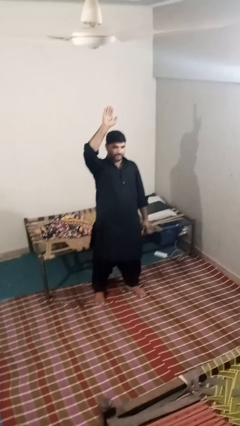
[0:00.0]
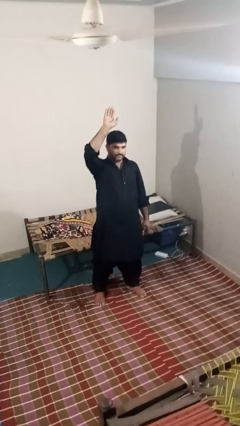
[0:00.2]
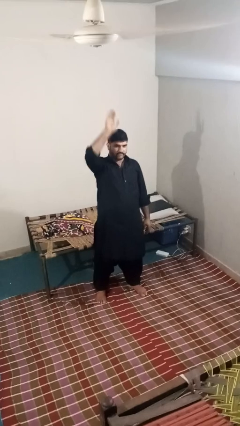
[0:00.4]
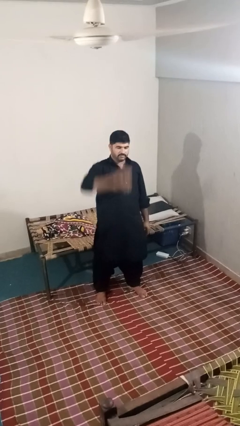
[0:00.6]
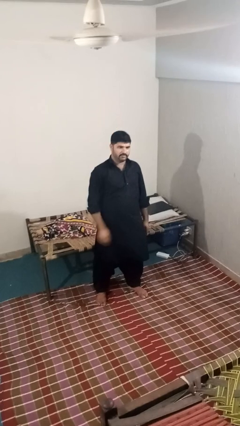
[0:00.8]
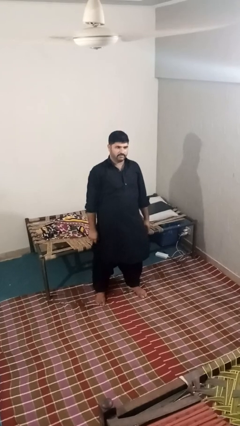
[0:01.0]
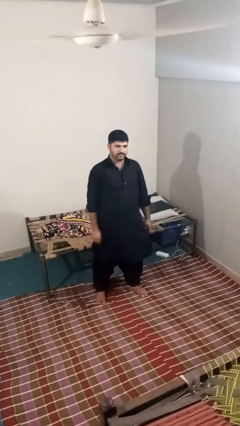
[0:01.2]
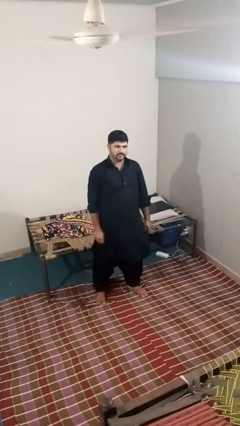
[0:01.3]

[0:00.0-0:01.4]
person gestures lower hand

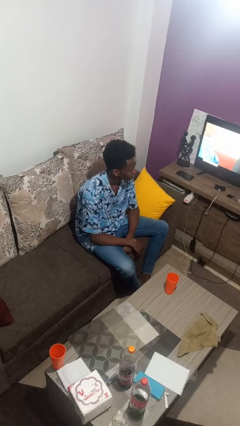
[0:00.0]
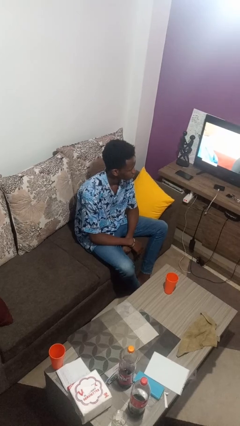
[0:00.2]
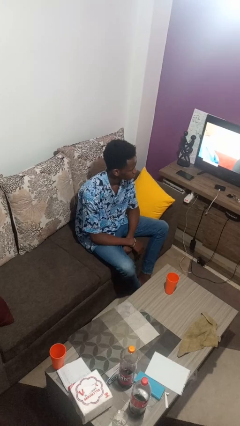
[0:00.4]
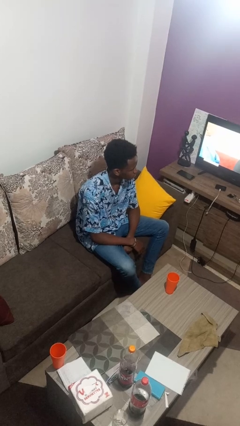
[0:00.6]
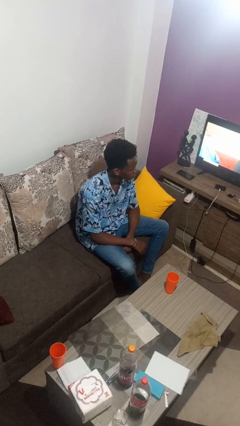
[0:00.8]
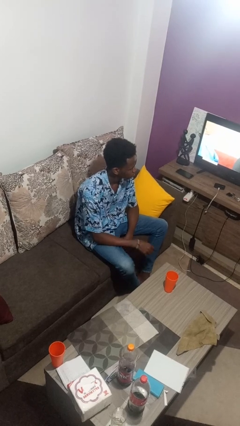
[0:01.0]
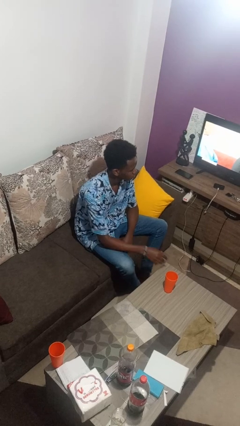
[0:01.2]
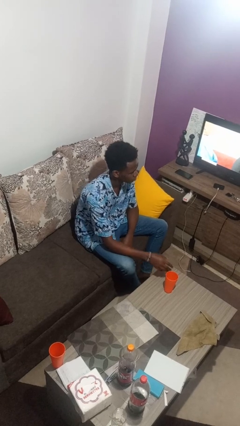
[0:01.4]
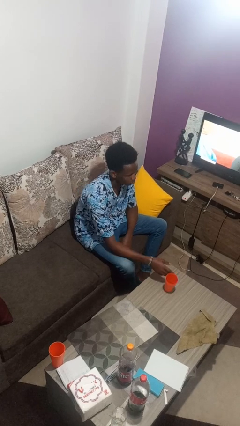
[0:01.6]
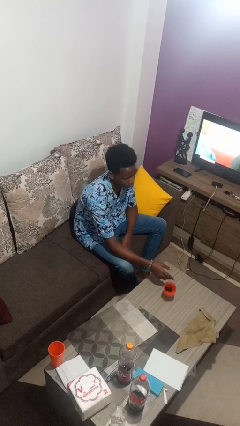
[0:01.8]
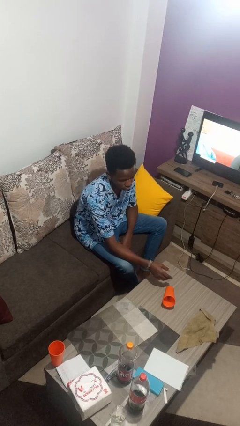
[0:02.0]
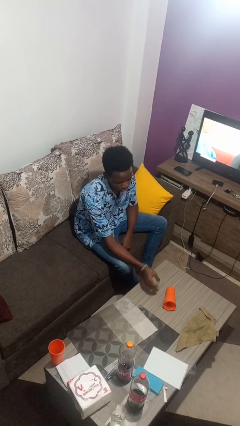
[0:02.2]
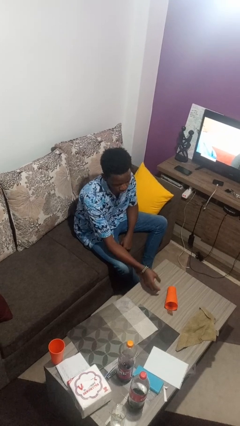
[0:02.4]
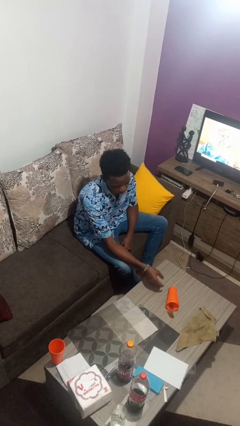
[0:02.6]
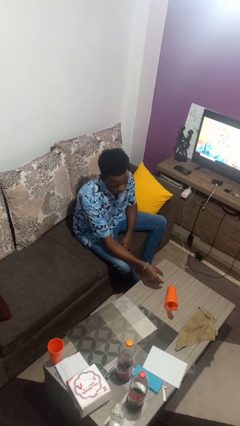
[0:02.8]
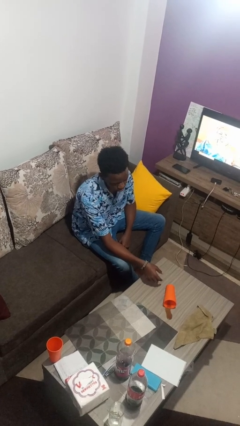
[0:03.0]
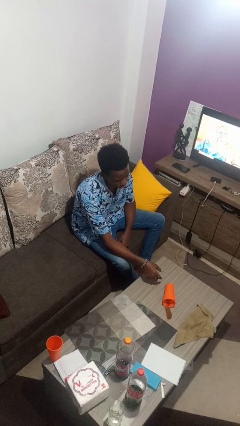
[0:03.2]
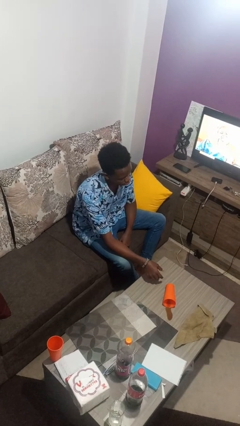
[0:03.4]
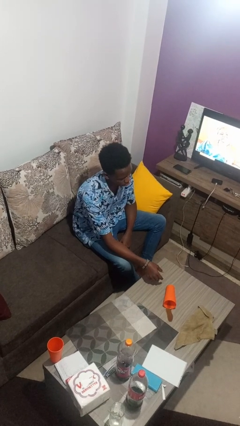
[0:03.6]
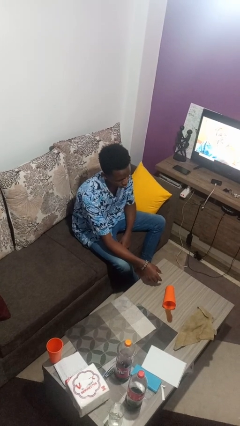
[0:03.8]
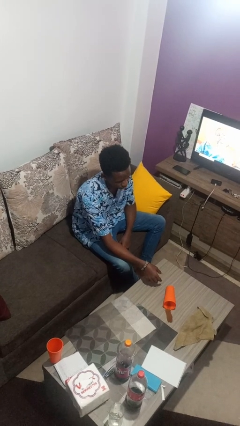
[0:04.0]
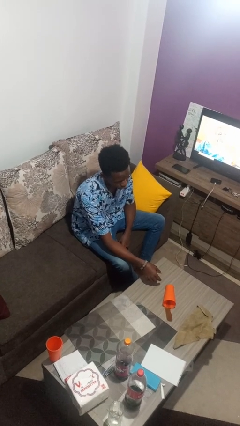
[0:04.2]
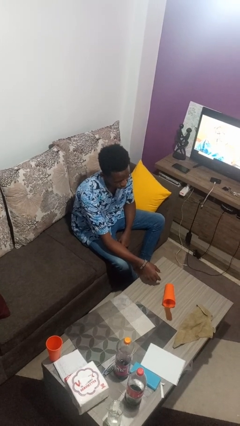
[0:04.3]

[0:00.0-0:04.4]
person spills on table

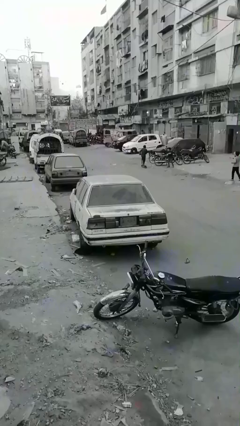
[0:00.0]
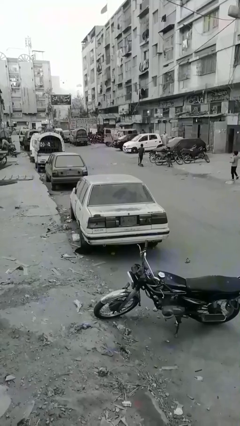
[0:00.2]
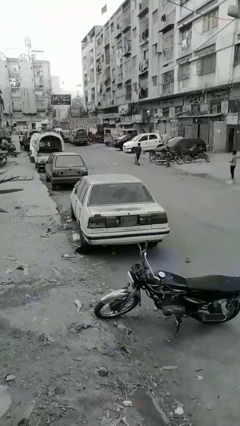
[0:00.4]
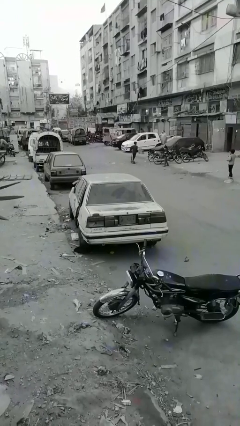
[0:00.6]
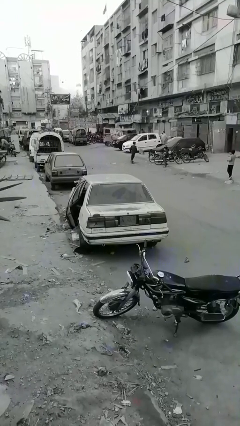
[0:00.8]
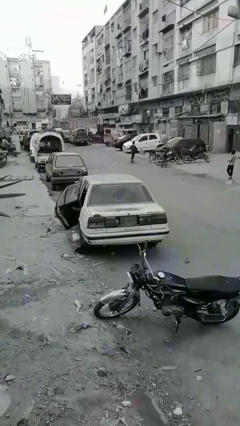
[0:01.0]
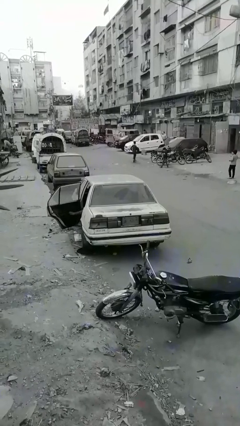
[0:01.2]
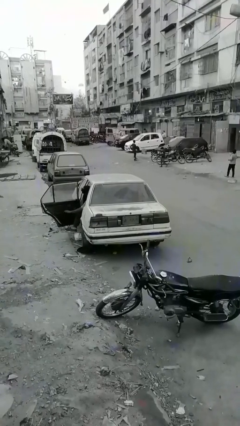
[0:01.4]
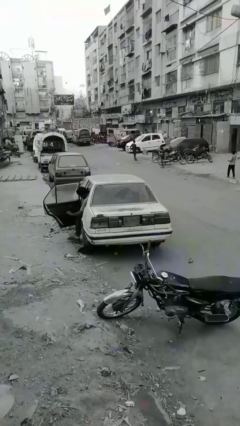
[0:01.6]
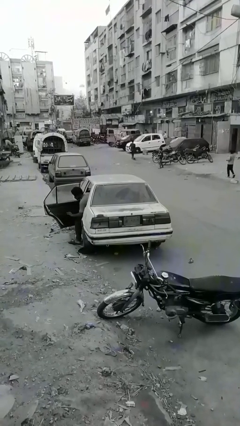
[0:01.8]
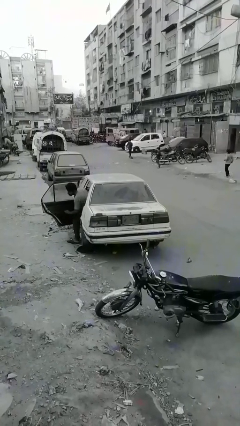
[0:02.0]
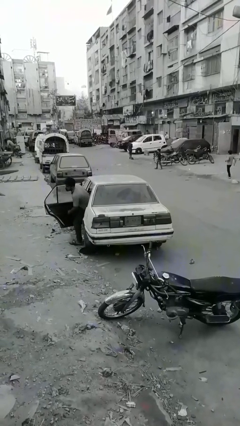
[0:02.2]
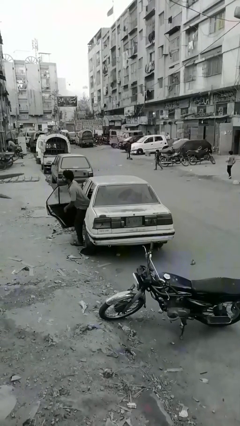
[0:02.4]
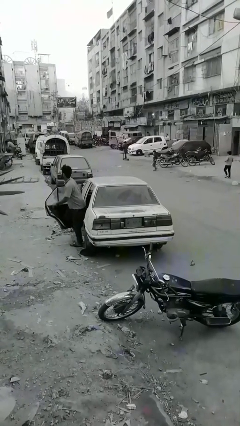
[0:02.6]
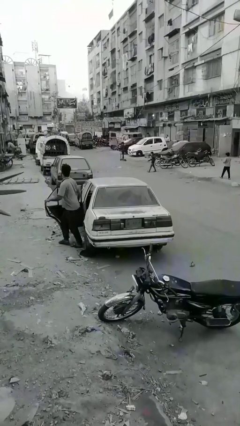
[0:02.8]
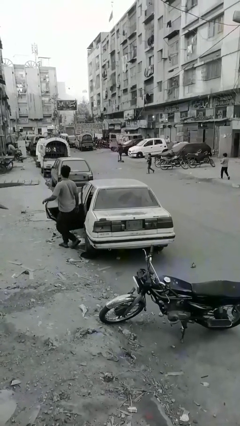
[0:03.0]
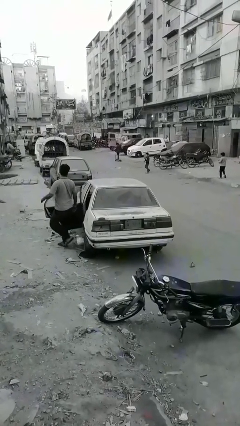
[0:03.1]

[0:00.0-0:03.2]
car drops off person

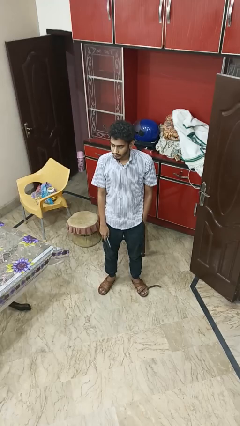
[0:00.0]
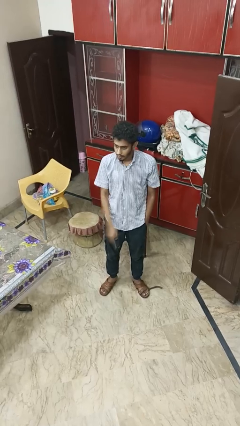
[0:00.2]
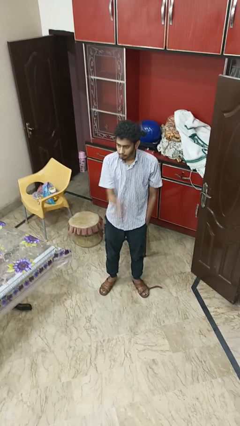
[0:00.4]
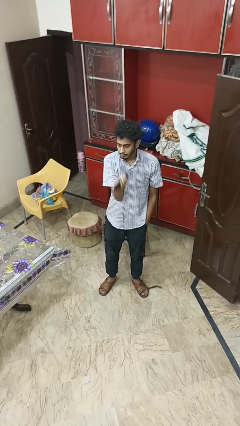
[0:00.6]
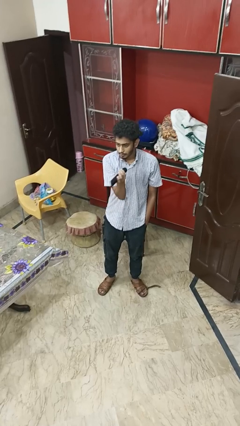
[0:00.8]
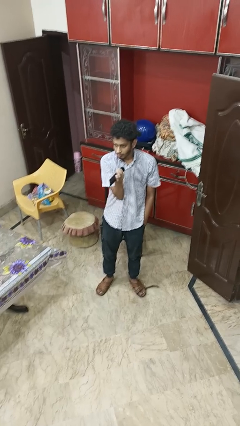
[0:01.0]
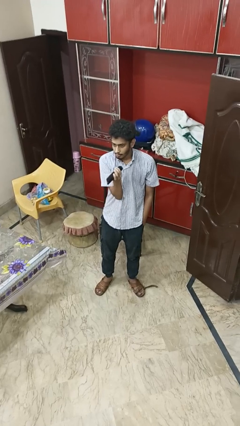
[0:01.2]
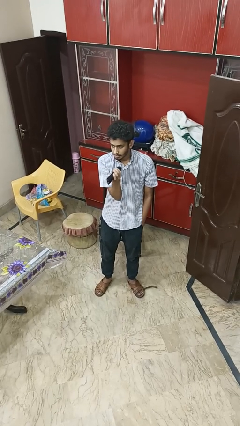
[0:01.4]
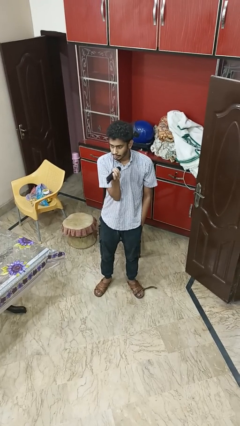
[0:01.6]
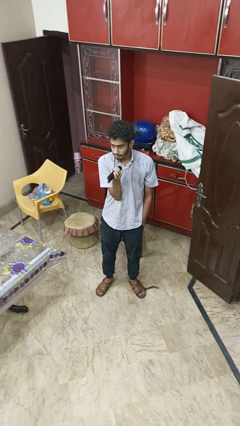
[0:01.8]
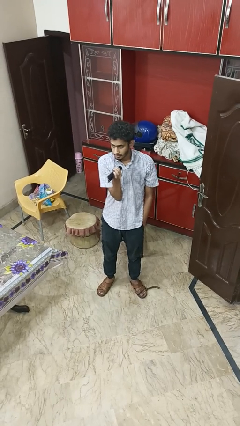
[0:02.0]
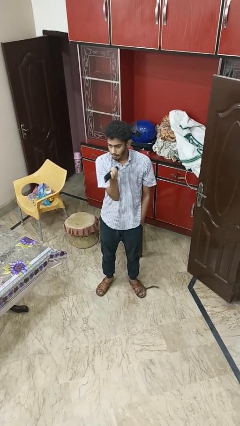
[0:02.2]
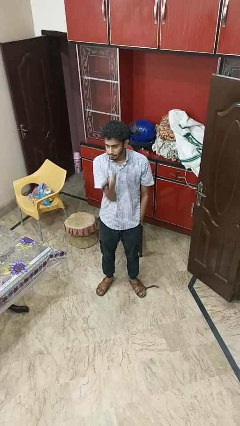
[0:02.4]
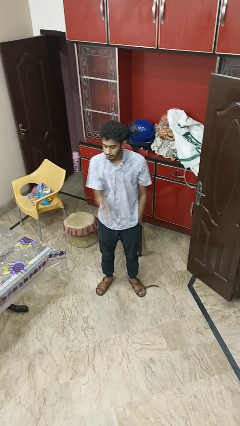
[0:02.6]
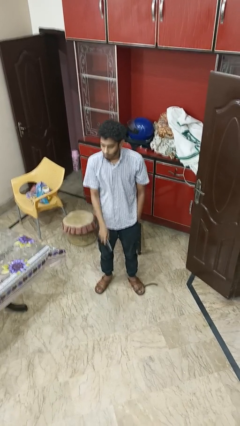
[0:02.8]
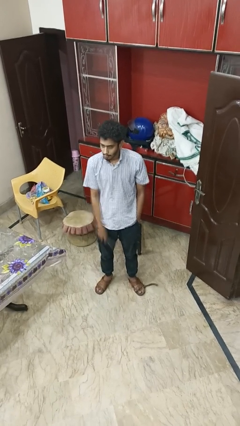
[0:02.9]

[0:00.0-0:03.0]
person uses television remote

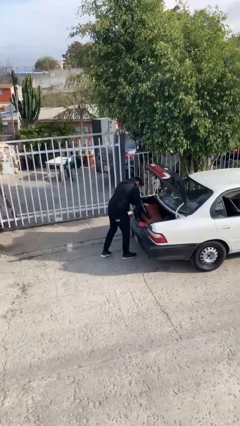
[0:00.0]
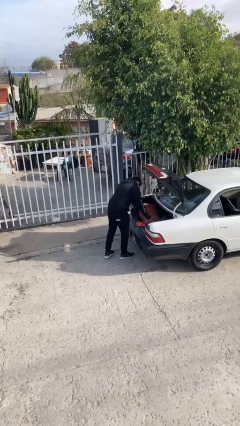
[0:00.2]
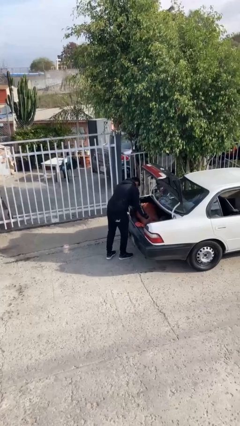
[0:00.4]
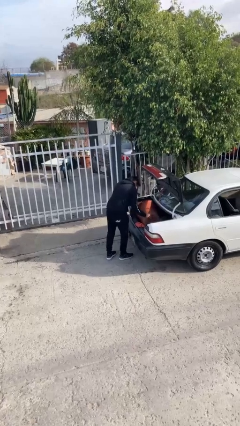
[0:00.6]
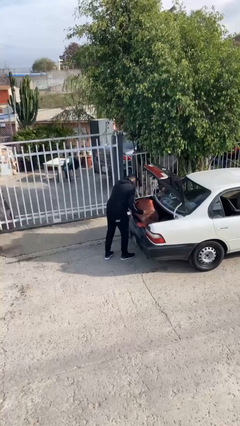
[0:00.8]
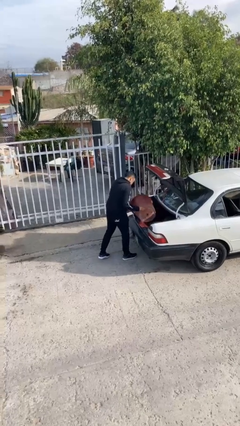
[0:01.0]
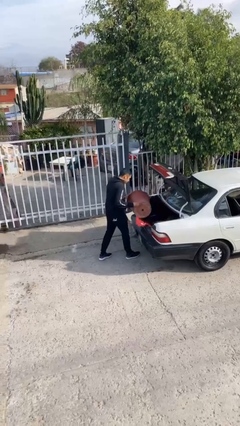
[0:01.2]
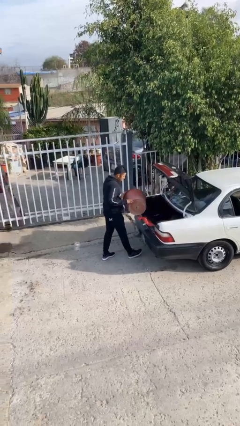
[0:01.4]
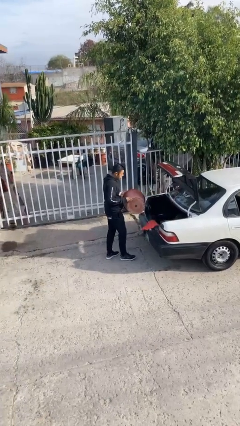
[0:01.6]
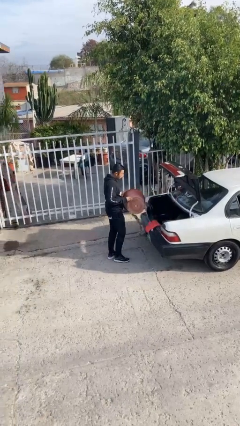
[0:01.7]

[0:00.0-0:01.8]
person unloads car

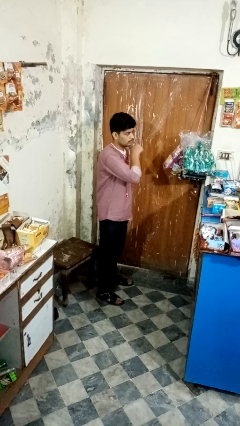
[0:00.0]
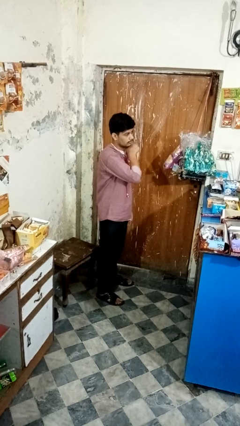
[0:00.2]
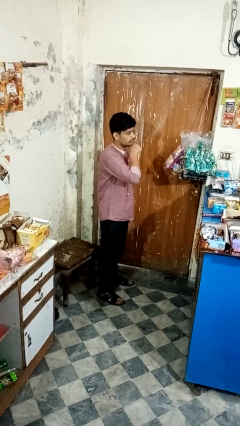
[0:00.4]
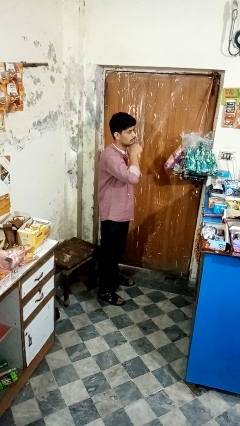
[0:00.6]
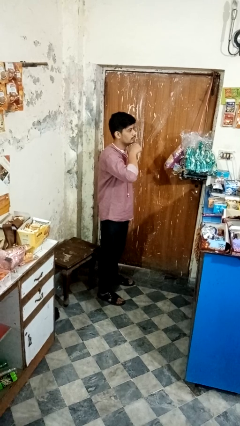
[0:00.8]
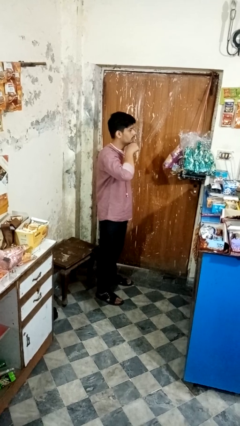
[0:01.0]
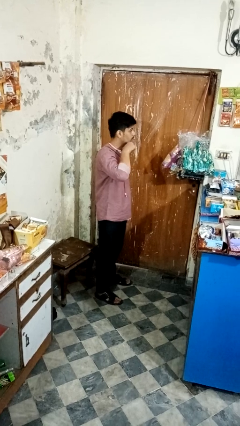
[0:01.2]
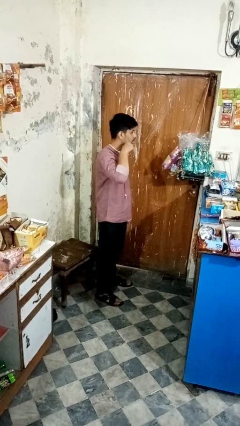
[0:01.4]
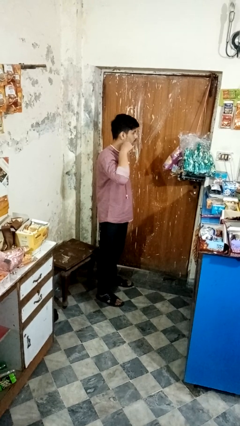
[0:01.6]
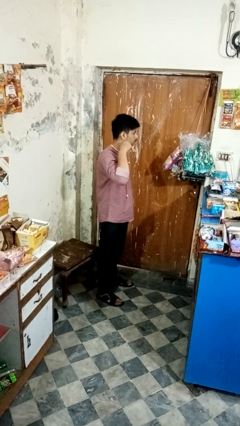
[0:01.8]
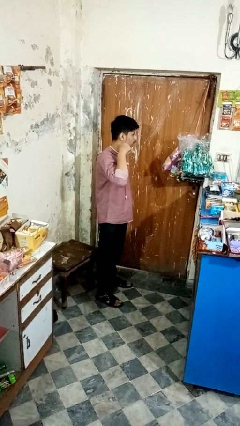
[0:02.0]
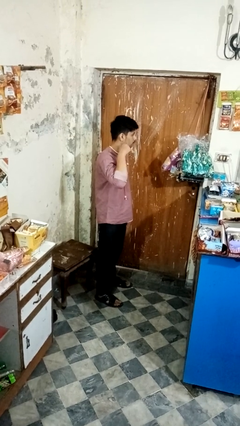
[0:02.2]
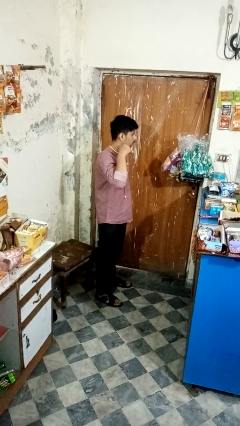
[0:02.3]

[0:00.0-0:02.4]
person gestures cut

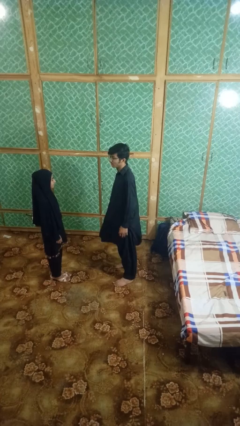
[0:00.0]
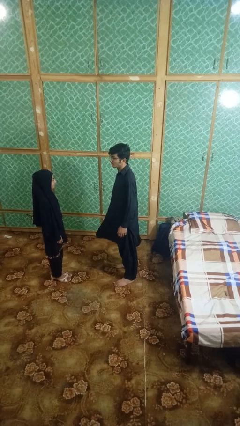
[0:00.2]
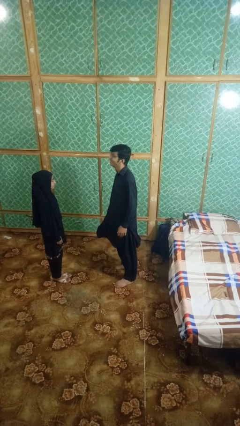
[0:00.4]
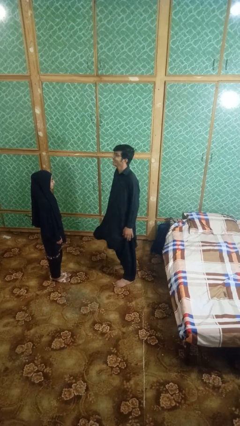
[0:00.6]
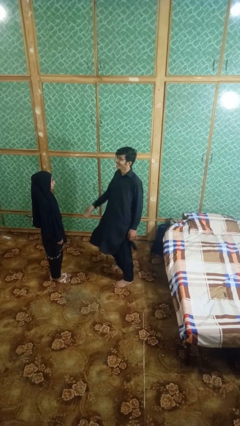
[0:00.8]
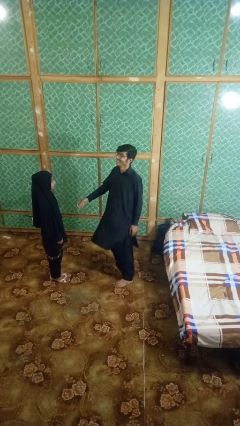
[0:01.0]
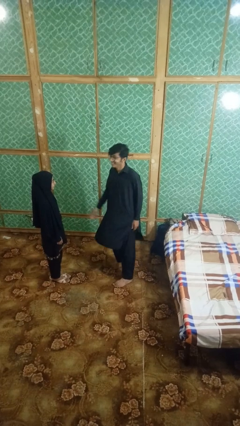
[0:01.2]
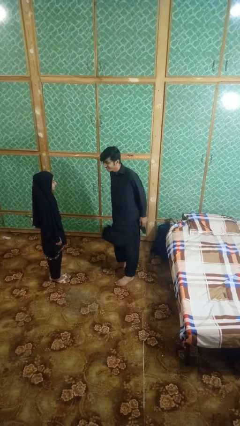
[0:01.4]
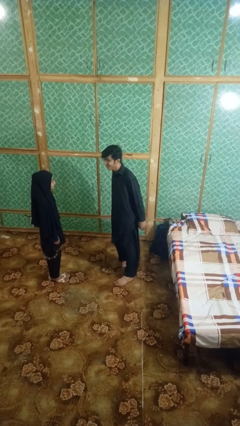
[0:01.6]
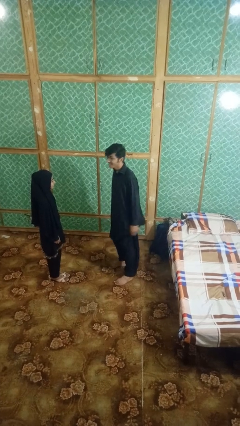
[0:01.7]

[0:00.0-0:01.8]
person laughs with person
